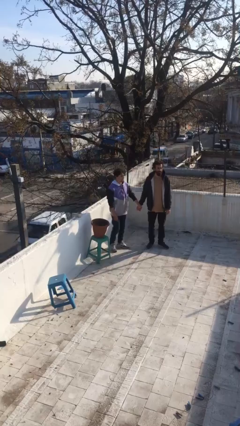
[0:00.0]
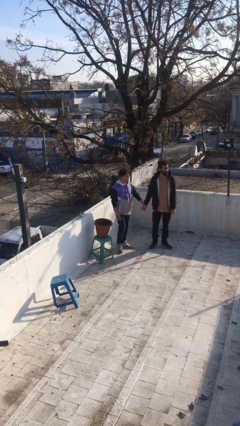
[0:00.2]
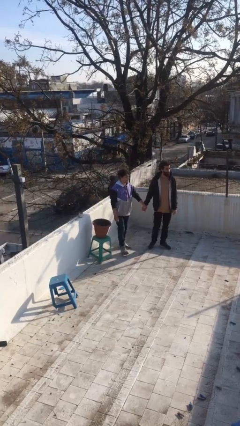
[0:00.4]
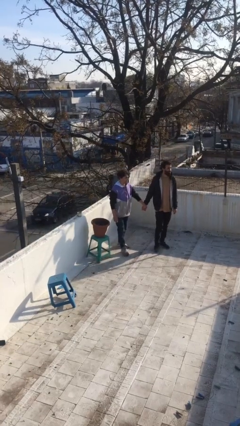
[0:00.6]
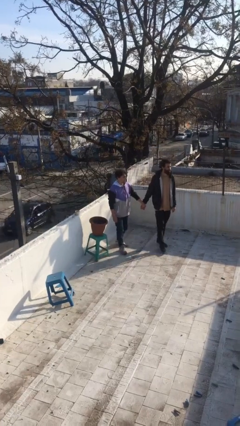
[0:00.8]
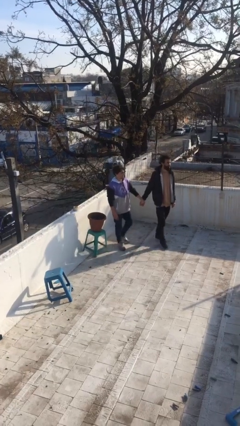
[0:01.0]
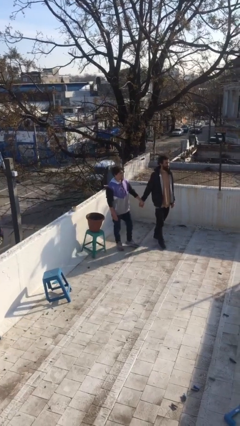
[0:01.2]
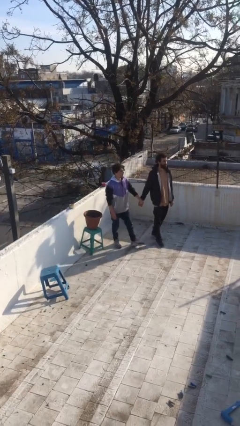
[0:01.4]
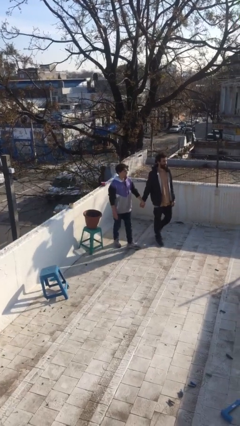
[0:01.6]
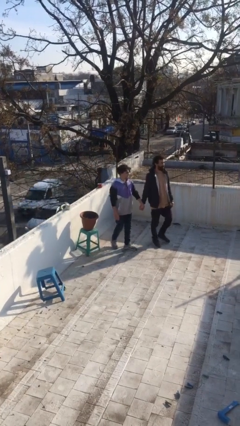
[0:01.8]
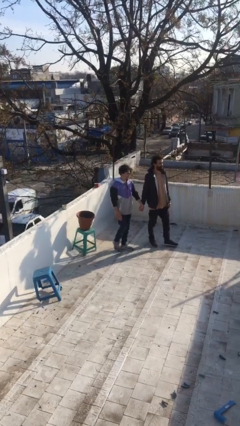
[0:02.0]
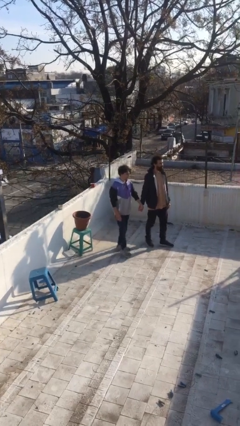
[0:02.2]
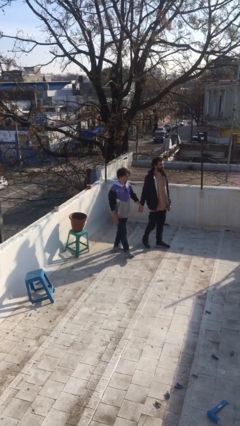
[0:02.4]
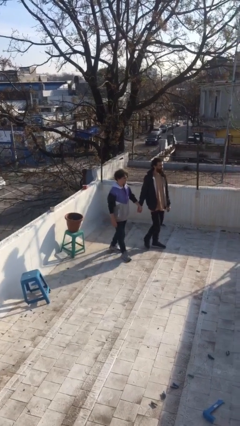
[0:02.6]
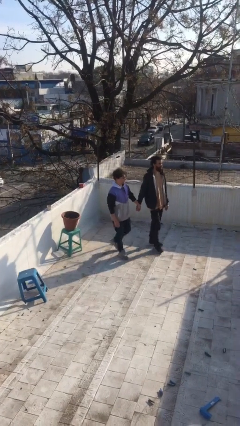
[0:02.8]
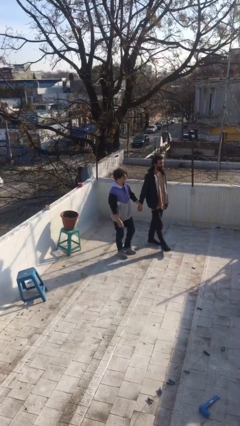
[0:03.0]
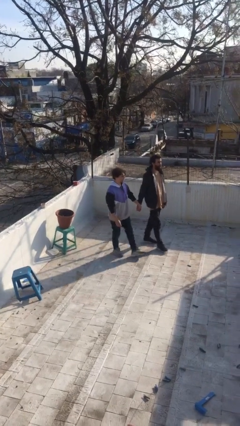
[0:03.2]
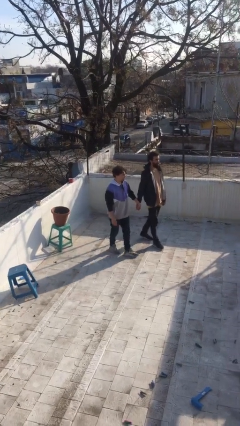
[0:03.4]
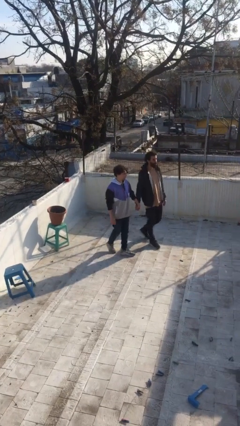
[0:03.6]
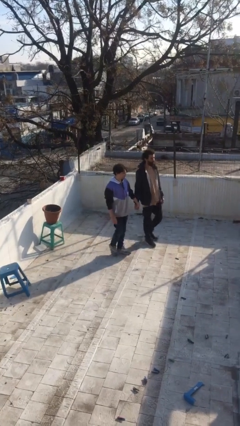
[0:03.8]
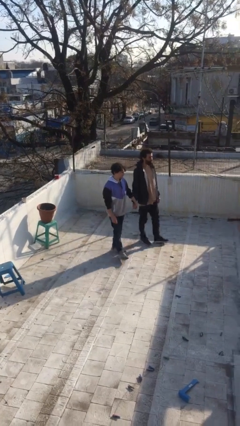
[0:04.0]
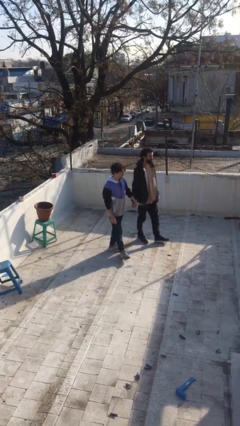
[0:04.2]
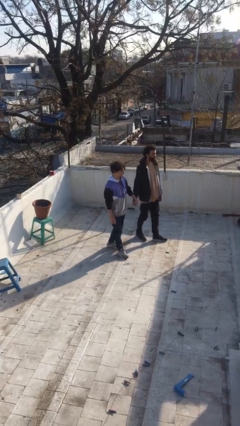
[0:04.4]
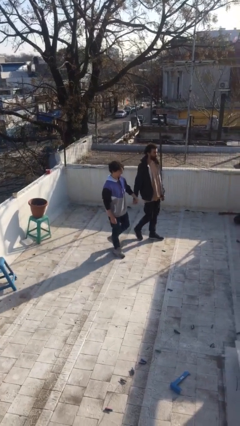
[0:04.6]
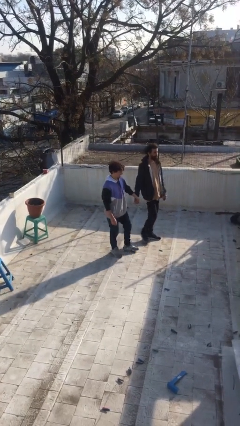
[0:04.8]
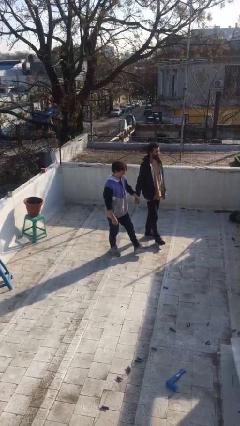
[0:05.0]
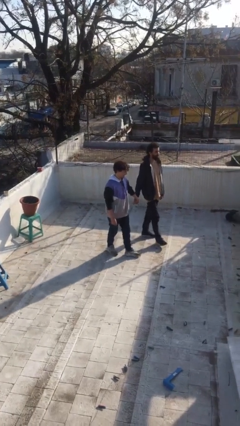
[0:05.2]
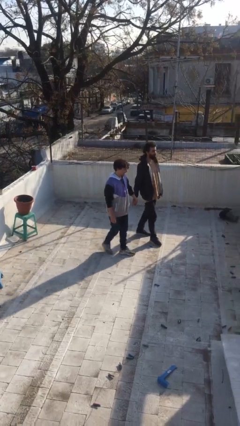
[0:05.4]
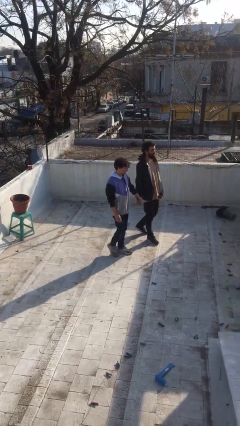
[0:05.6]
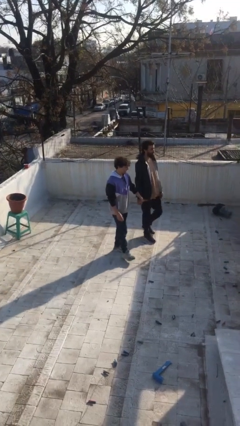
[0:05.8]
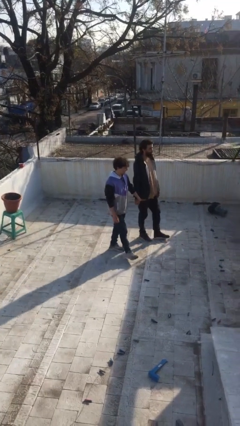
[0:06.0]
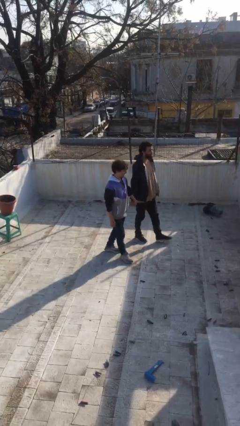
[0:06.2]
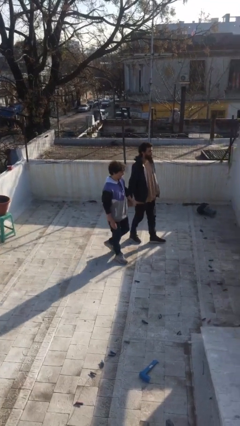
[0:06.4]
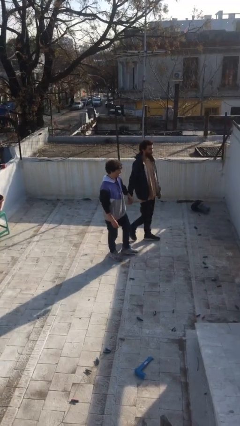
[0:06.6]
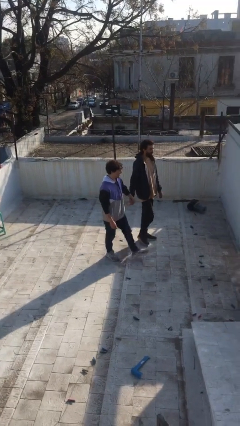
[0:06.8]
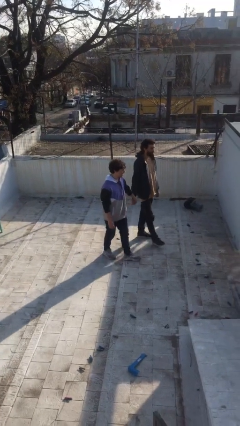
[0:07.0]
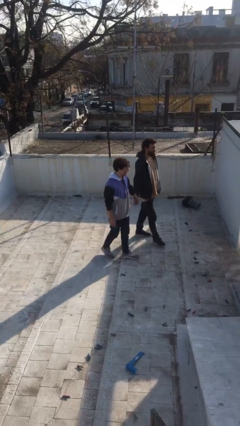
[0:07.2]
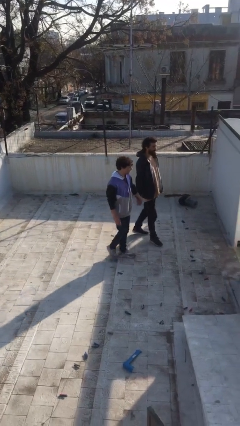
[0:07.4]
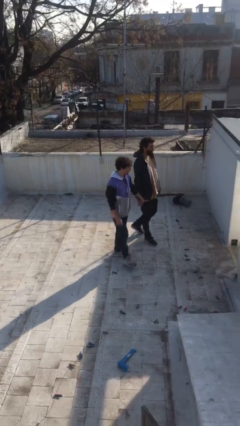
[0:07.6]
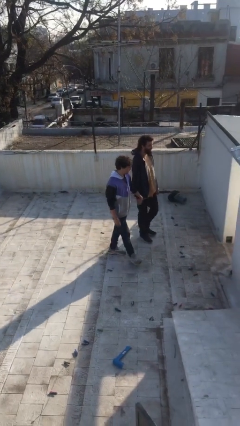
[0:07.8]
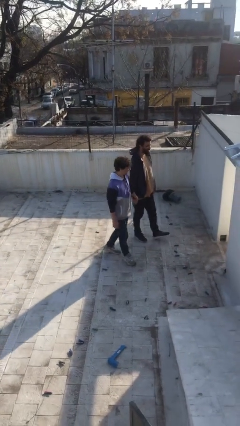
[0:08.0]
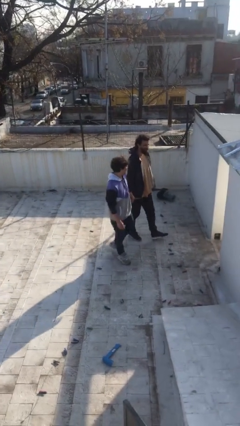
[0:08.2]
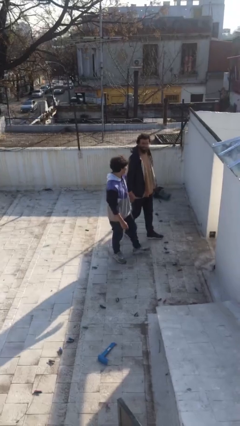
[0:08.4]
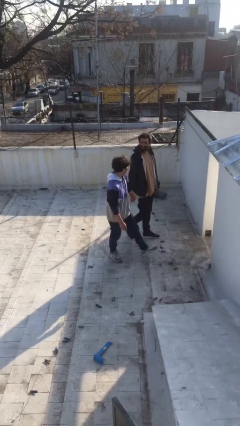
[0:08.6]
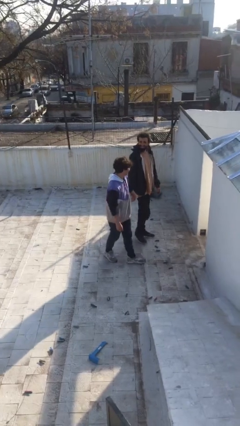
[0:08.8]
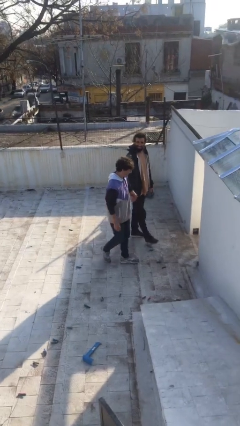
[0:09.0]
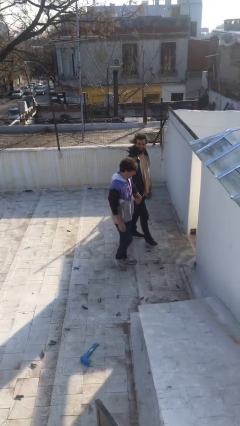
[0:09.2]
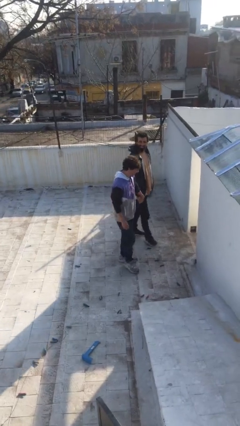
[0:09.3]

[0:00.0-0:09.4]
person holds hand

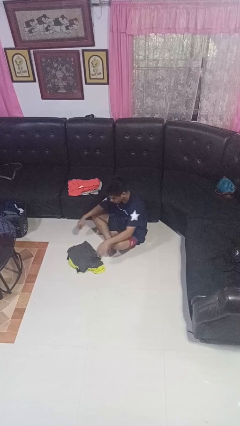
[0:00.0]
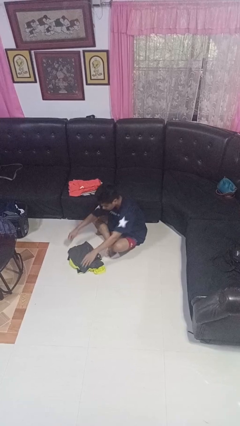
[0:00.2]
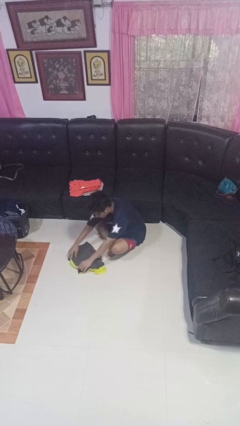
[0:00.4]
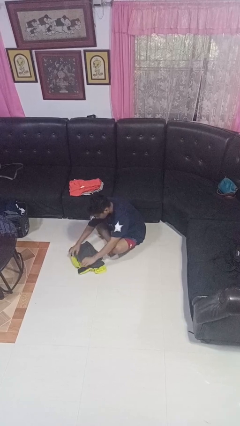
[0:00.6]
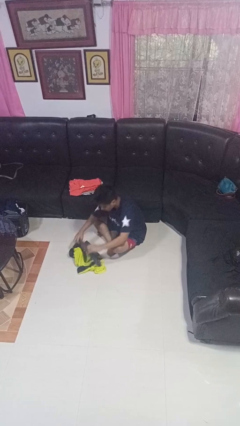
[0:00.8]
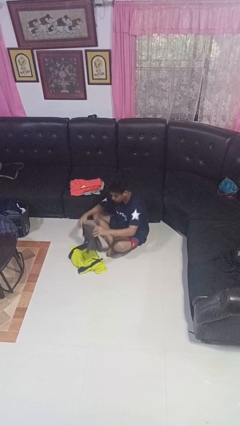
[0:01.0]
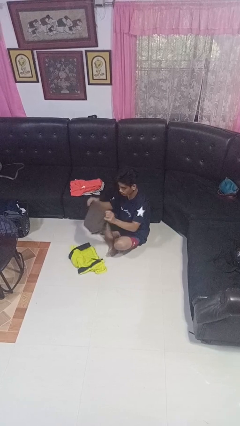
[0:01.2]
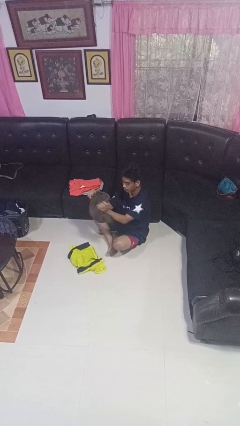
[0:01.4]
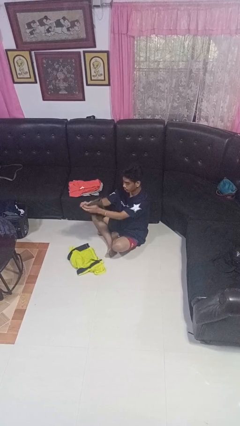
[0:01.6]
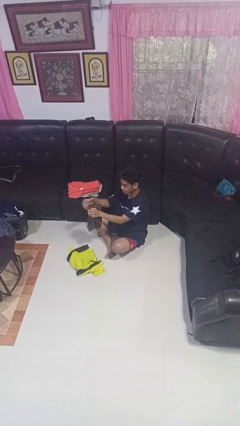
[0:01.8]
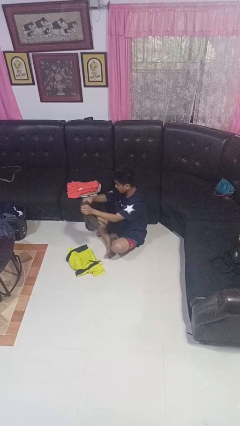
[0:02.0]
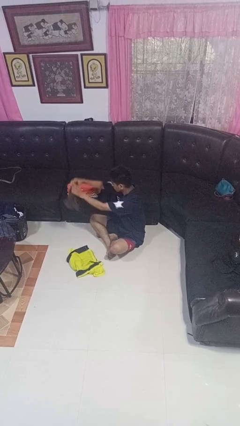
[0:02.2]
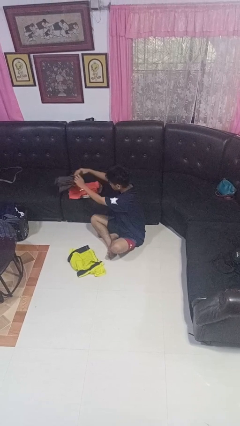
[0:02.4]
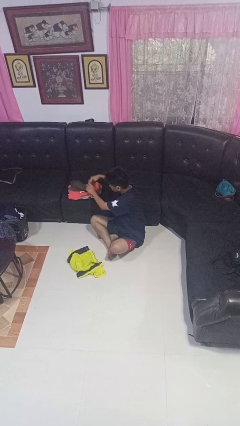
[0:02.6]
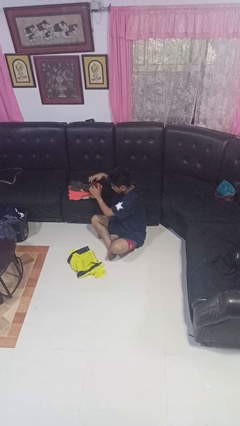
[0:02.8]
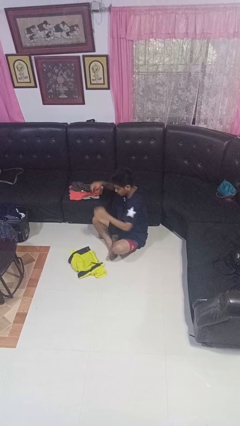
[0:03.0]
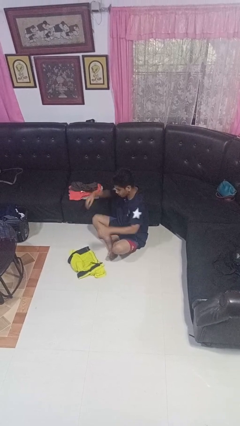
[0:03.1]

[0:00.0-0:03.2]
person folds shirt

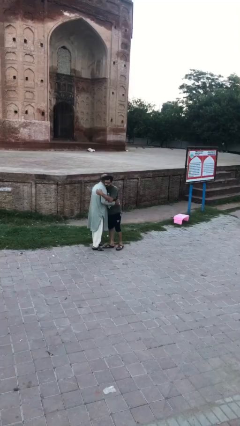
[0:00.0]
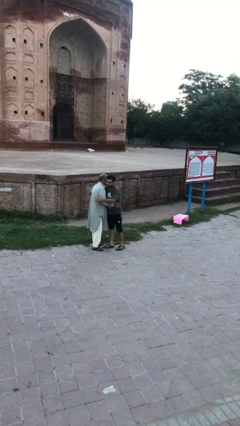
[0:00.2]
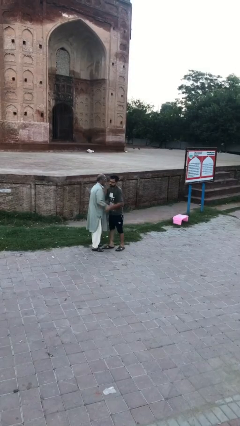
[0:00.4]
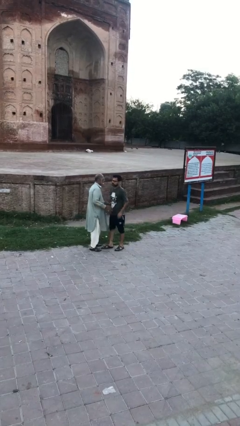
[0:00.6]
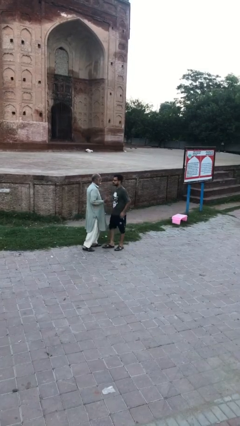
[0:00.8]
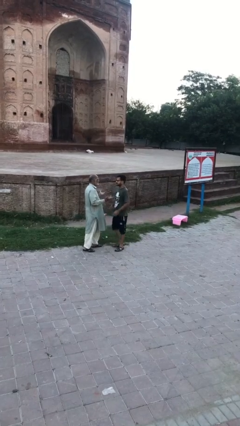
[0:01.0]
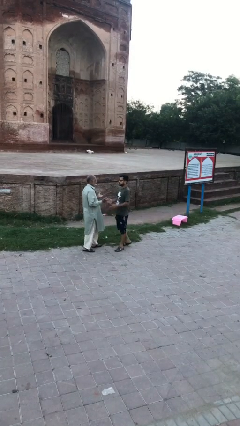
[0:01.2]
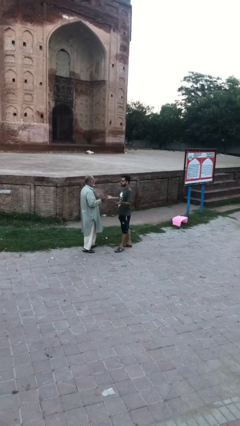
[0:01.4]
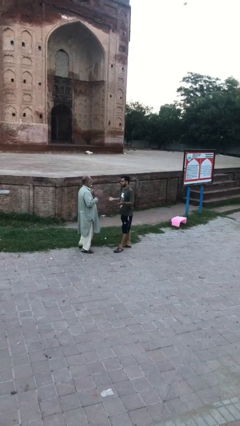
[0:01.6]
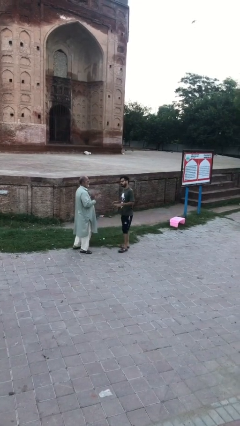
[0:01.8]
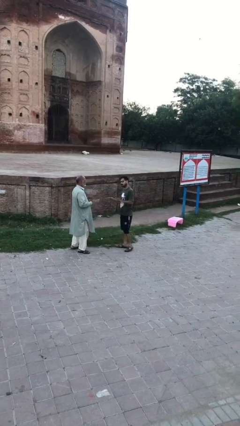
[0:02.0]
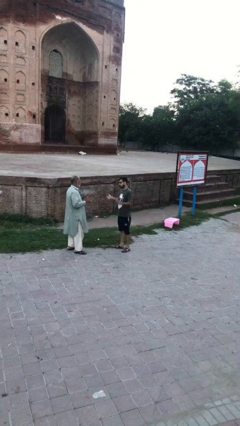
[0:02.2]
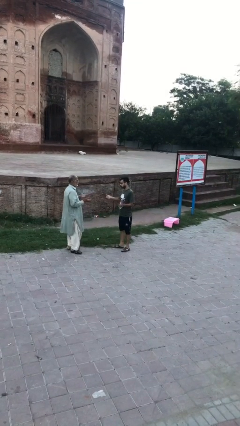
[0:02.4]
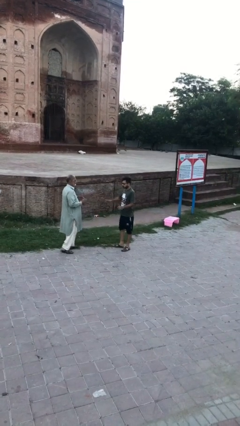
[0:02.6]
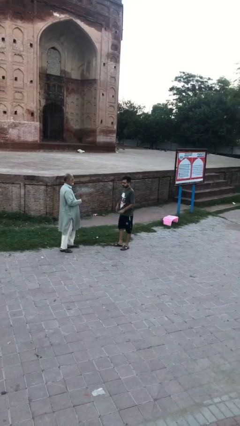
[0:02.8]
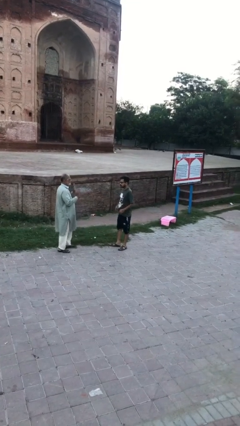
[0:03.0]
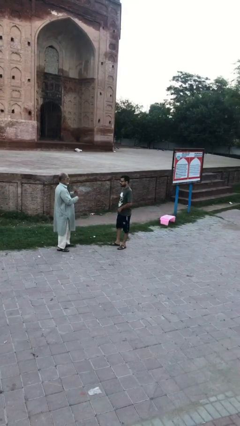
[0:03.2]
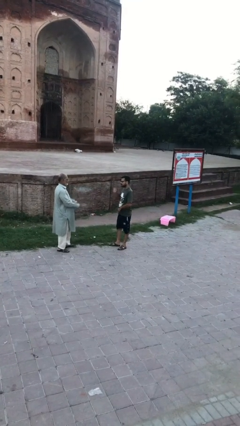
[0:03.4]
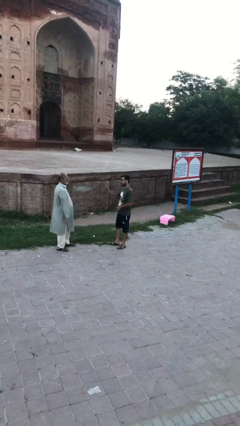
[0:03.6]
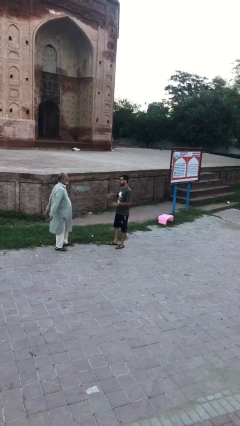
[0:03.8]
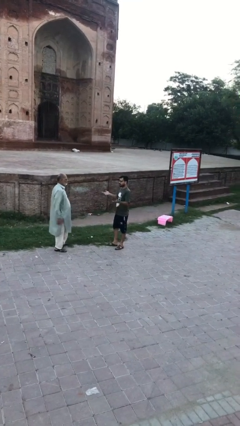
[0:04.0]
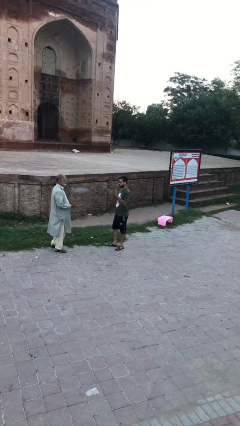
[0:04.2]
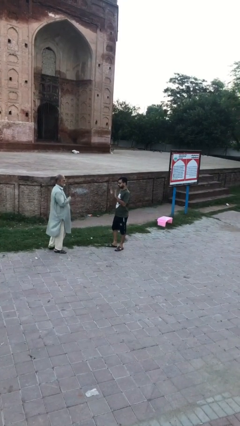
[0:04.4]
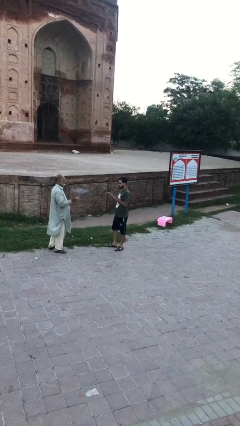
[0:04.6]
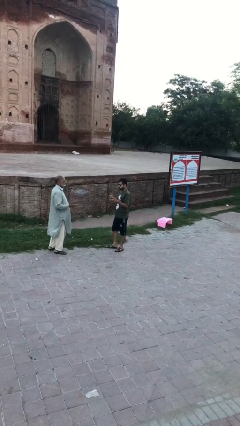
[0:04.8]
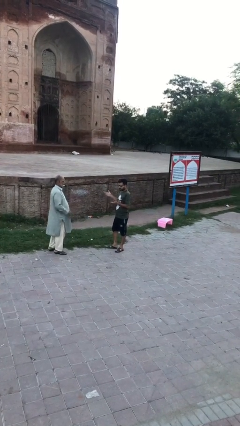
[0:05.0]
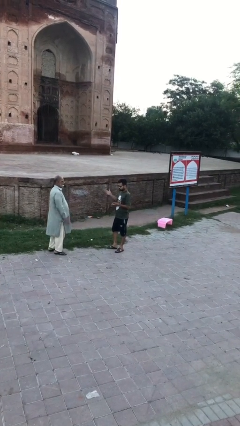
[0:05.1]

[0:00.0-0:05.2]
person talks to person
